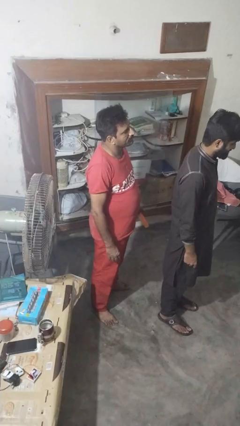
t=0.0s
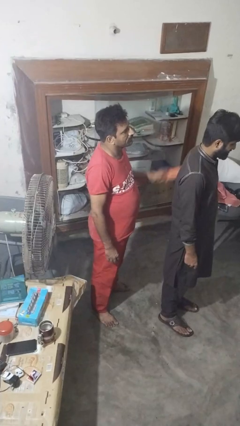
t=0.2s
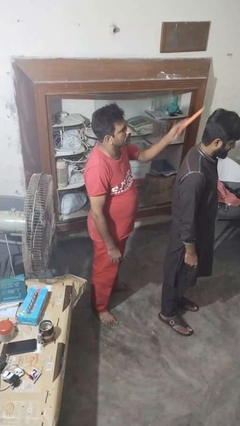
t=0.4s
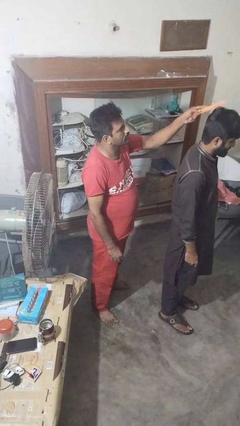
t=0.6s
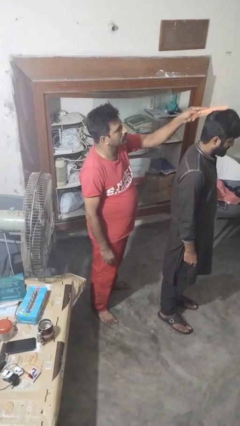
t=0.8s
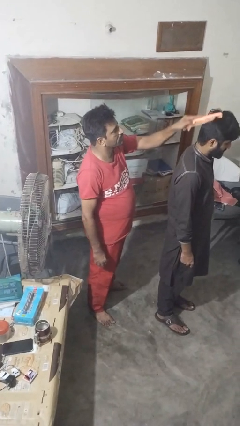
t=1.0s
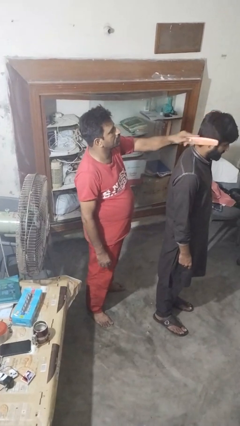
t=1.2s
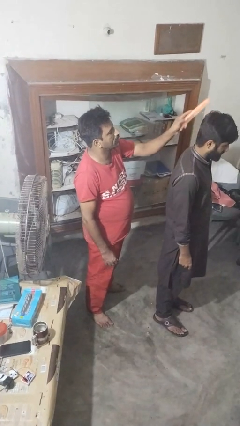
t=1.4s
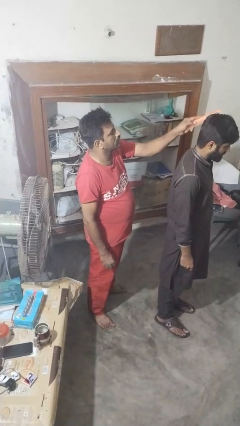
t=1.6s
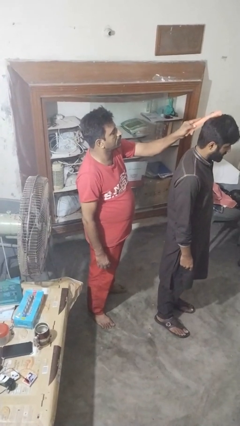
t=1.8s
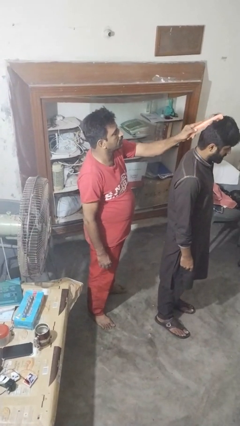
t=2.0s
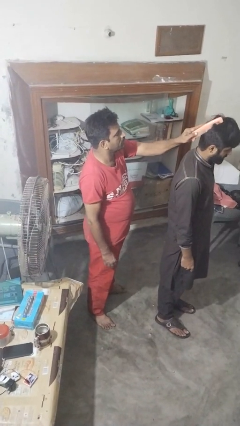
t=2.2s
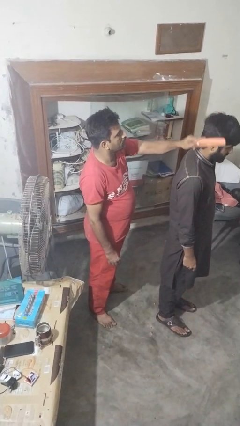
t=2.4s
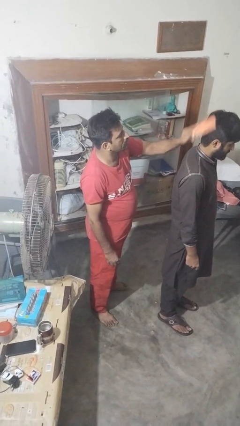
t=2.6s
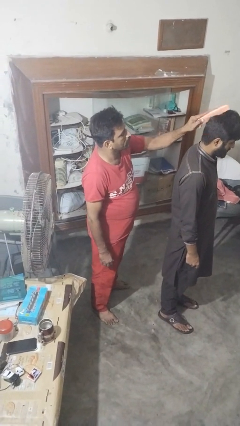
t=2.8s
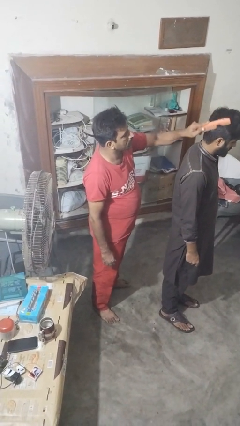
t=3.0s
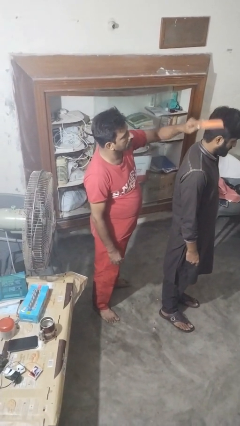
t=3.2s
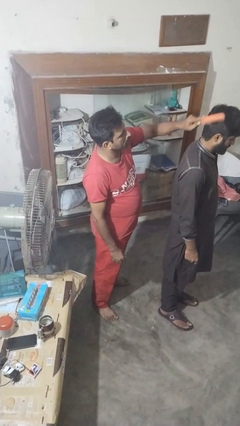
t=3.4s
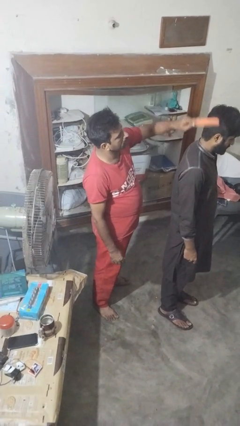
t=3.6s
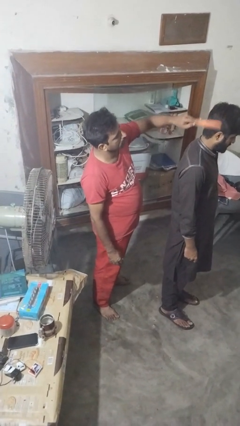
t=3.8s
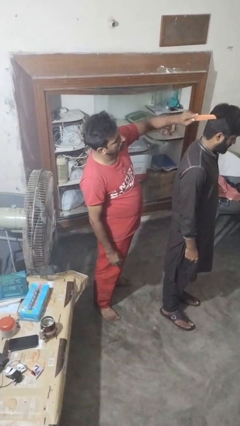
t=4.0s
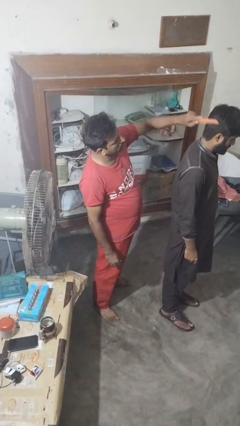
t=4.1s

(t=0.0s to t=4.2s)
person brushes hair of person

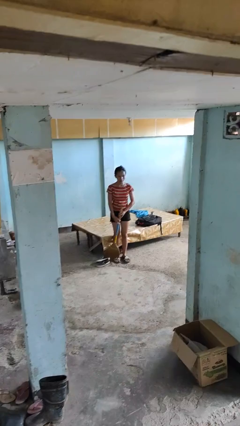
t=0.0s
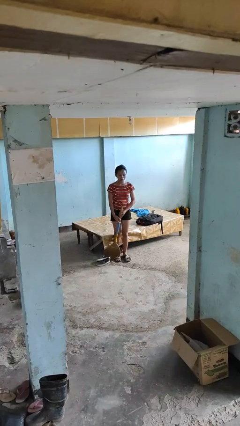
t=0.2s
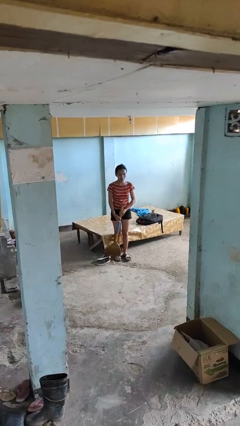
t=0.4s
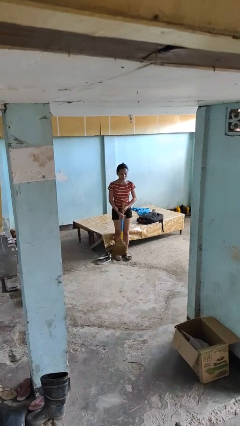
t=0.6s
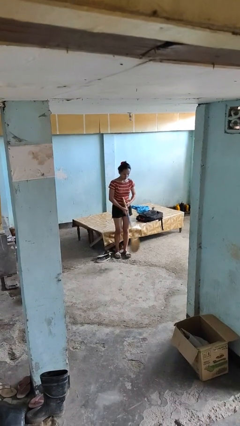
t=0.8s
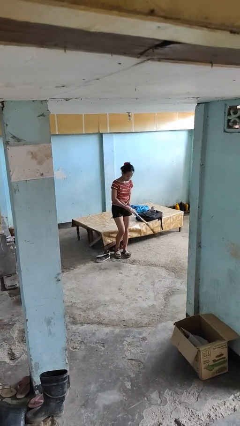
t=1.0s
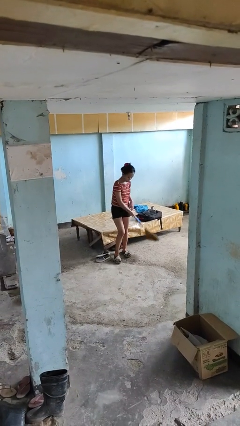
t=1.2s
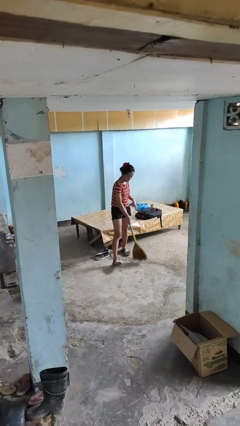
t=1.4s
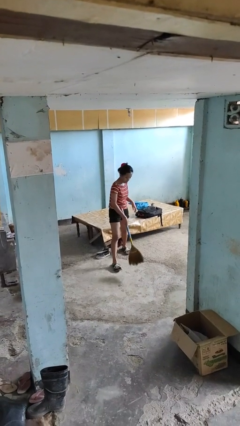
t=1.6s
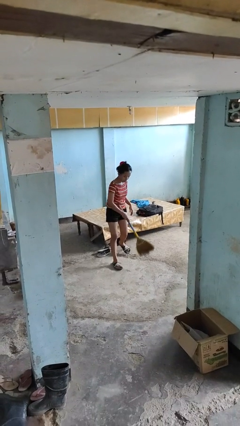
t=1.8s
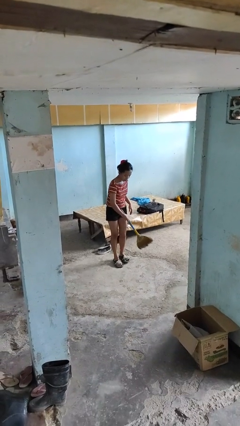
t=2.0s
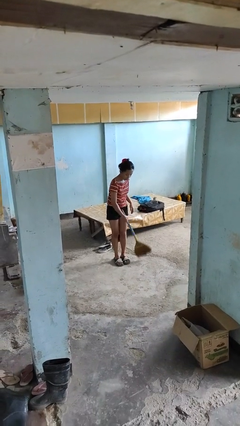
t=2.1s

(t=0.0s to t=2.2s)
person sweeps floor

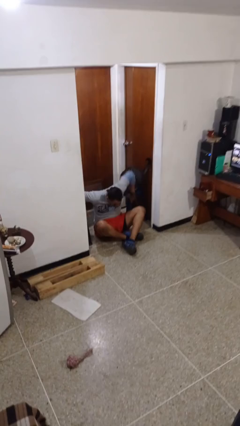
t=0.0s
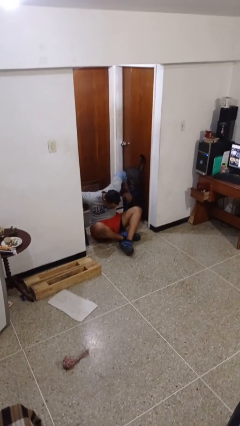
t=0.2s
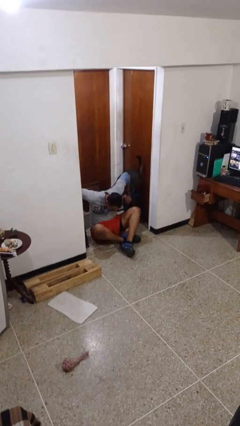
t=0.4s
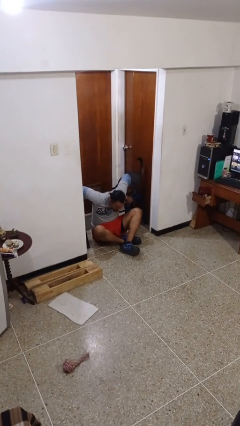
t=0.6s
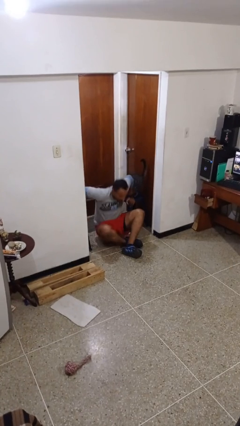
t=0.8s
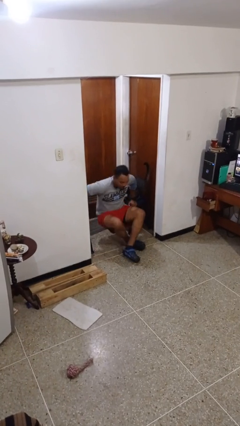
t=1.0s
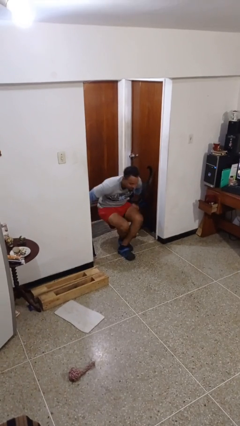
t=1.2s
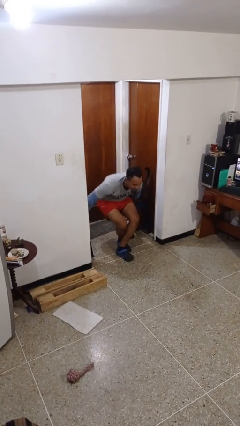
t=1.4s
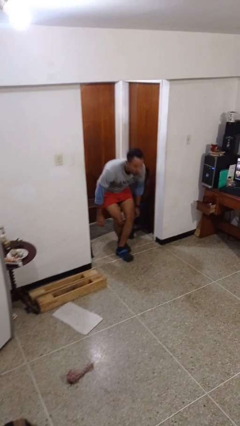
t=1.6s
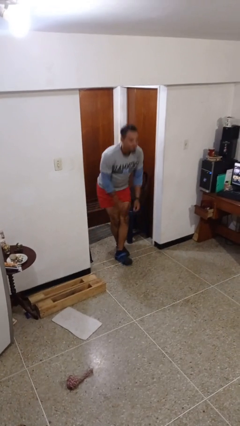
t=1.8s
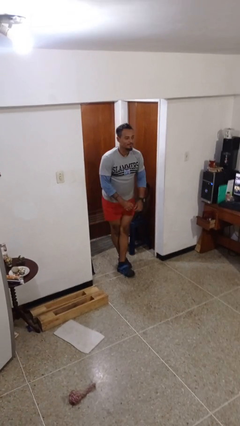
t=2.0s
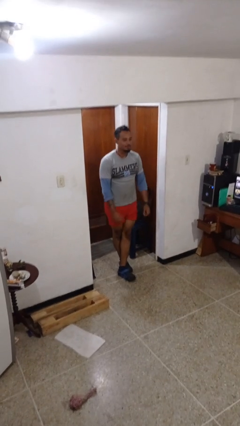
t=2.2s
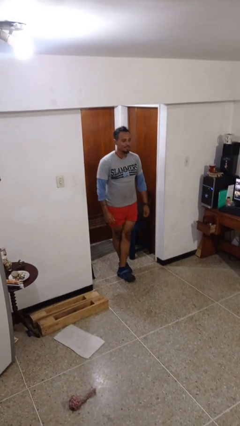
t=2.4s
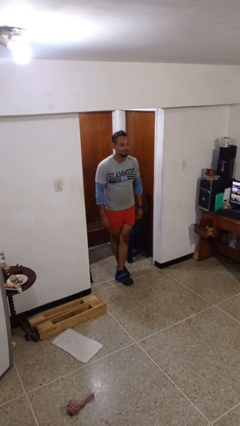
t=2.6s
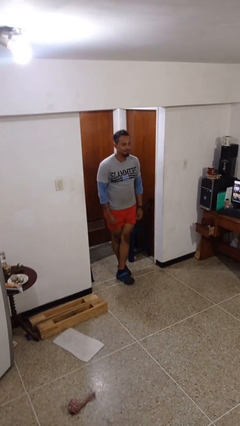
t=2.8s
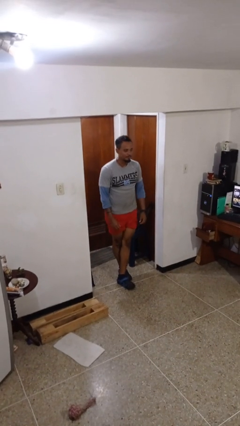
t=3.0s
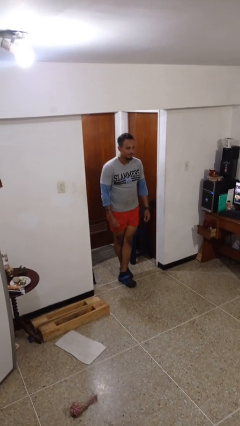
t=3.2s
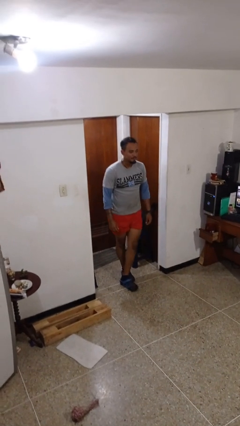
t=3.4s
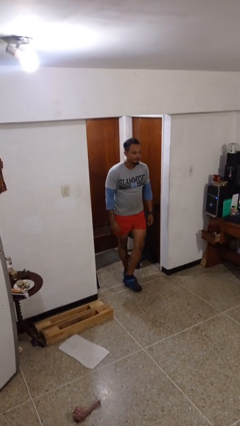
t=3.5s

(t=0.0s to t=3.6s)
person stands up from floor

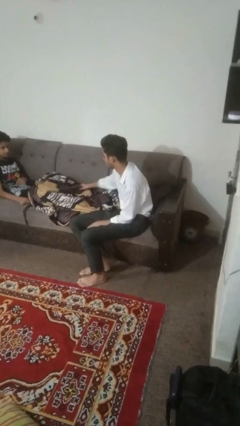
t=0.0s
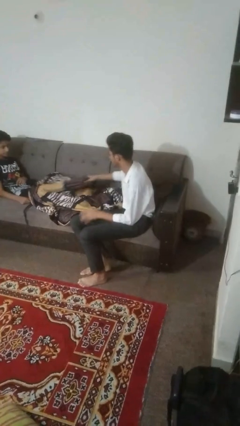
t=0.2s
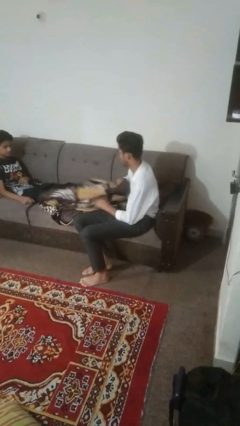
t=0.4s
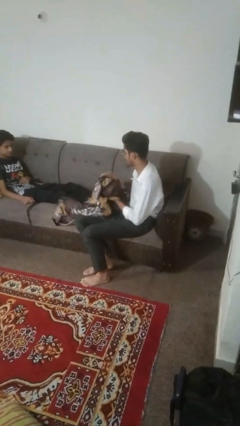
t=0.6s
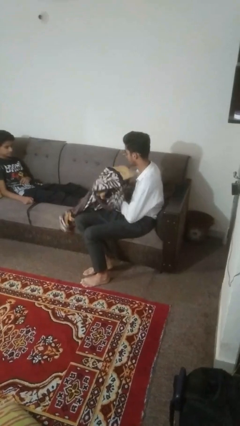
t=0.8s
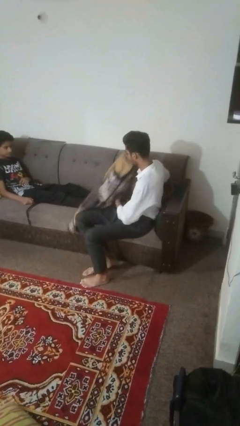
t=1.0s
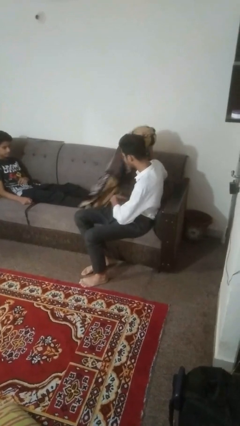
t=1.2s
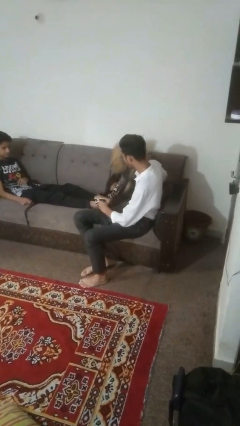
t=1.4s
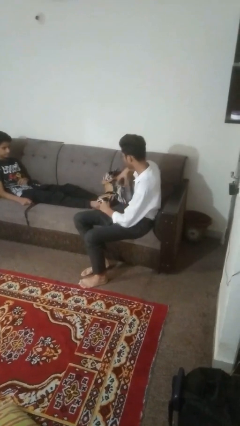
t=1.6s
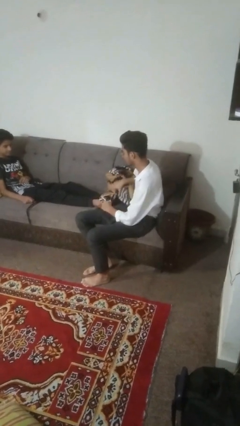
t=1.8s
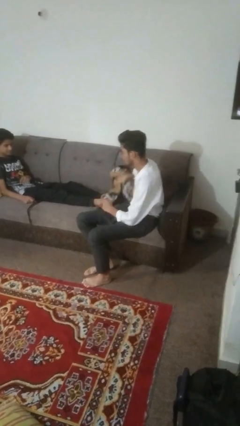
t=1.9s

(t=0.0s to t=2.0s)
person uncovers friend with blanket

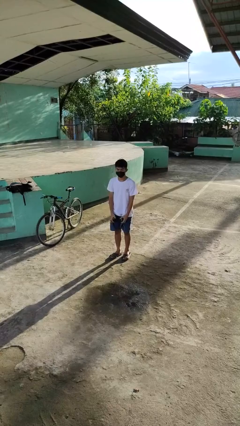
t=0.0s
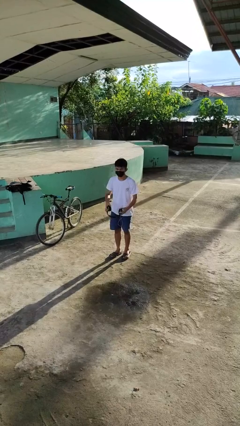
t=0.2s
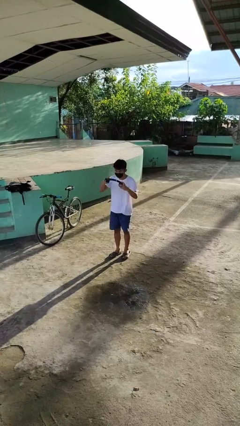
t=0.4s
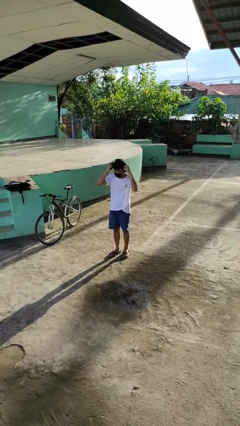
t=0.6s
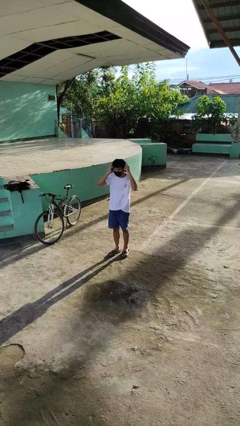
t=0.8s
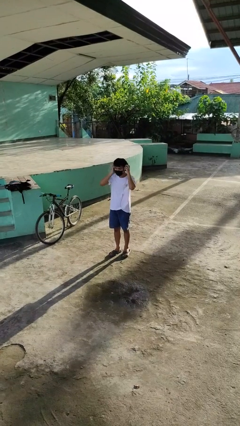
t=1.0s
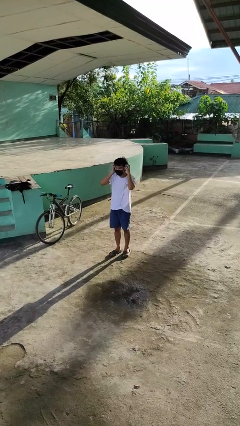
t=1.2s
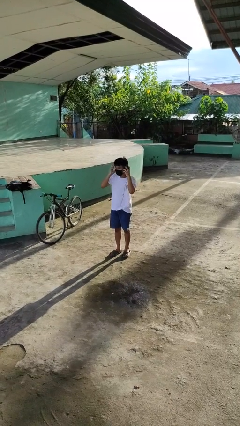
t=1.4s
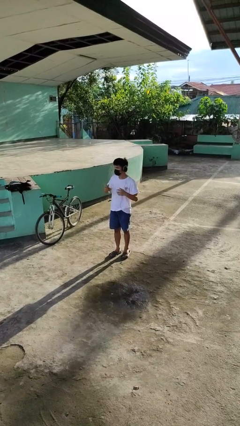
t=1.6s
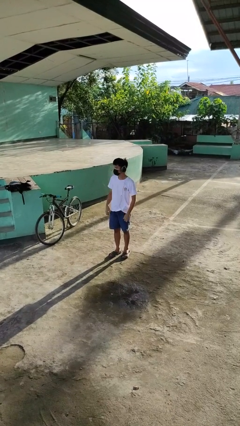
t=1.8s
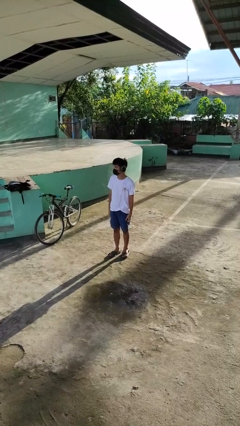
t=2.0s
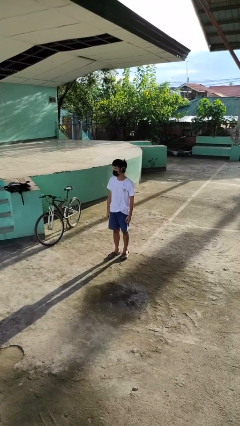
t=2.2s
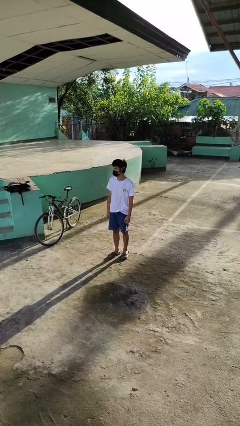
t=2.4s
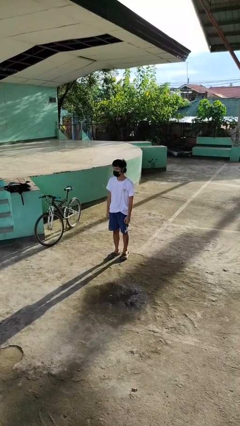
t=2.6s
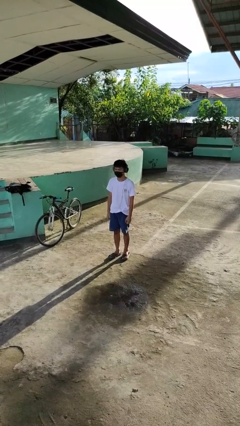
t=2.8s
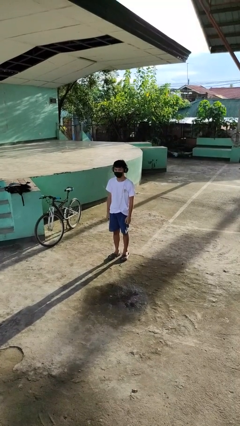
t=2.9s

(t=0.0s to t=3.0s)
person puts on headphones

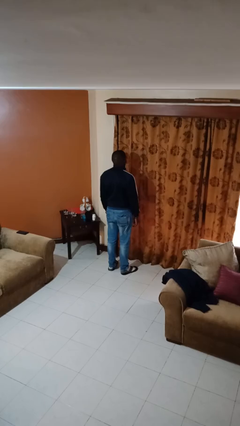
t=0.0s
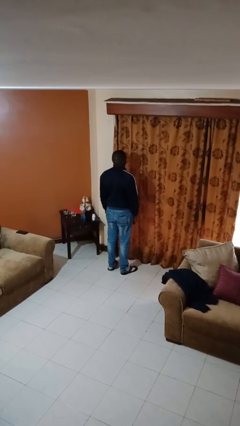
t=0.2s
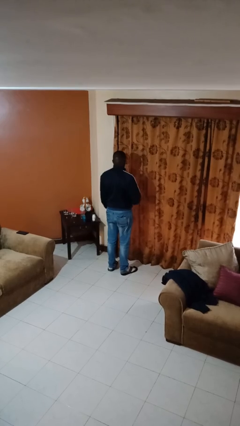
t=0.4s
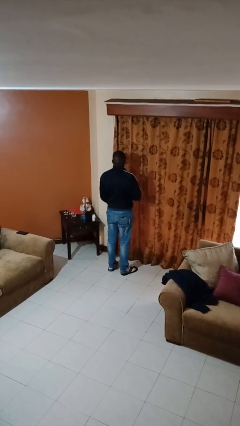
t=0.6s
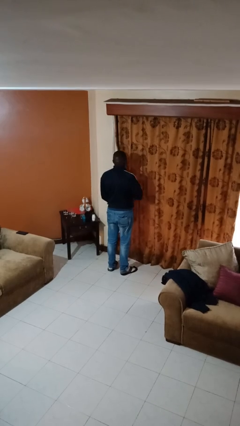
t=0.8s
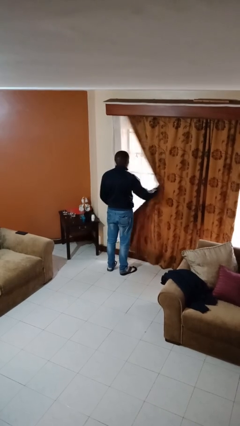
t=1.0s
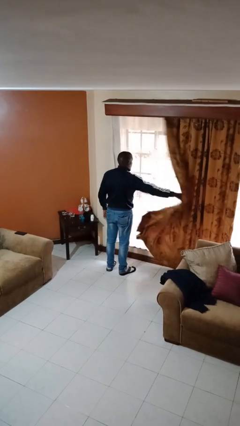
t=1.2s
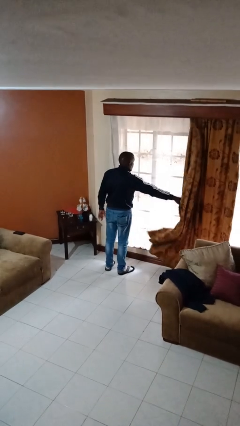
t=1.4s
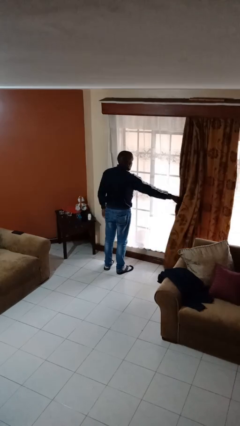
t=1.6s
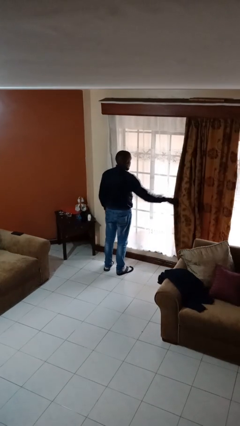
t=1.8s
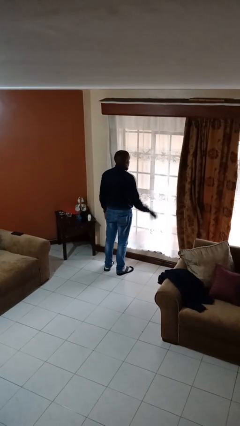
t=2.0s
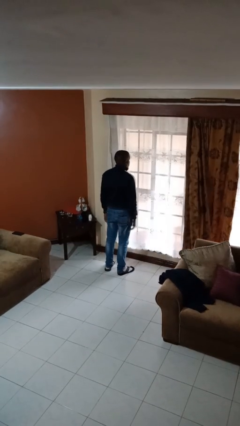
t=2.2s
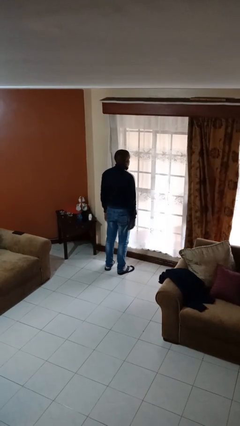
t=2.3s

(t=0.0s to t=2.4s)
person opens curtains
